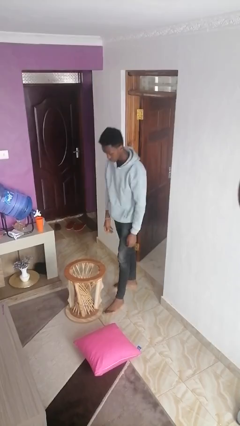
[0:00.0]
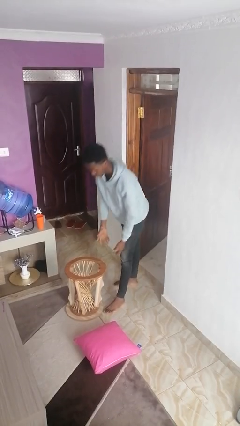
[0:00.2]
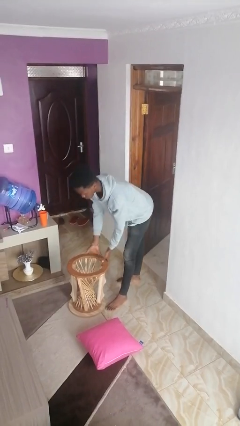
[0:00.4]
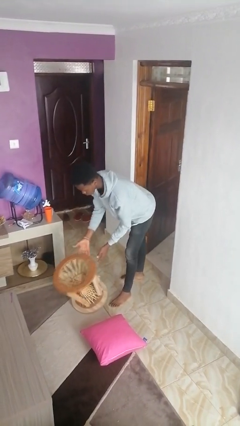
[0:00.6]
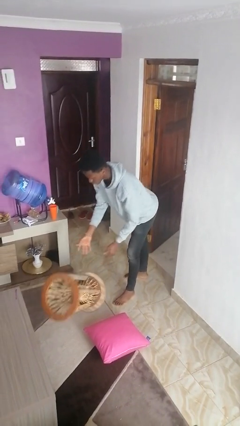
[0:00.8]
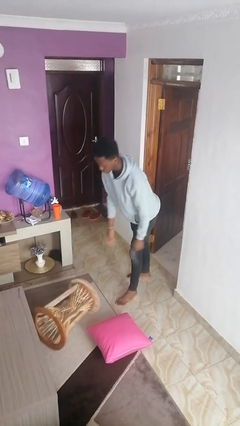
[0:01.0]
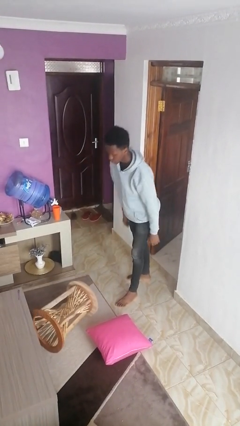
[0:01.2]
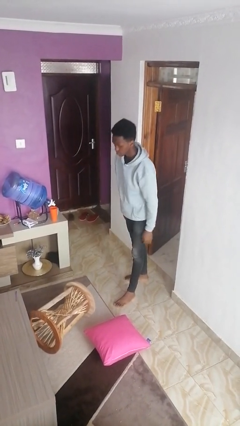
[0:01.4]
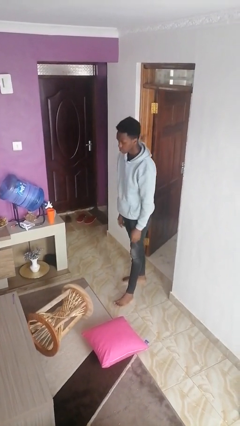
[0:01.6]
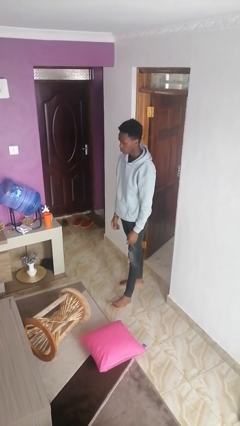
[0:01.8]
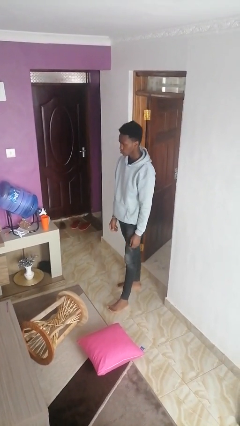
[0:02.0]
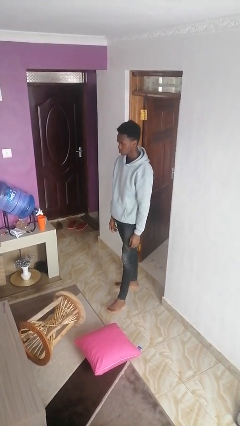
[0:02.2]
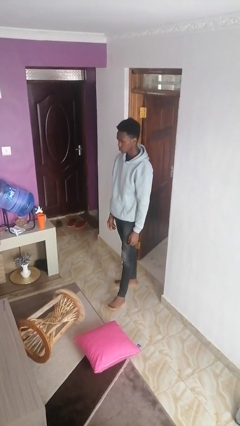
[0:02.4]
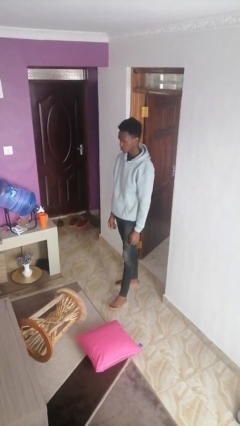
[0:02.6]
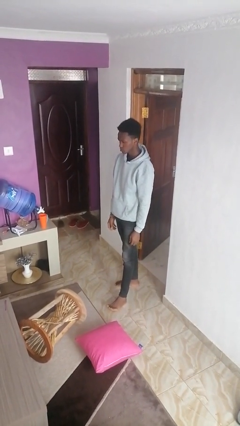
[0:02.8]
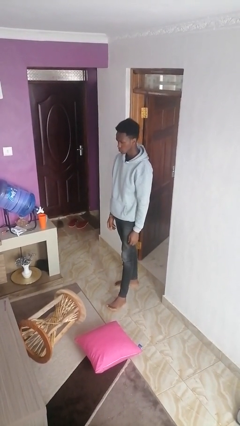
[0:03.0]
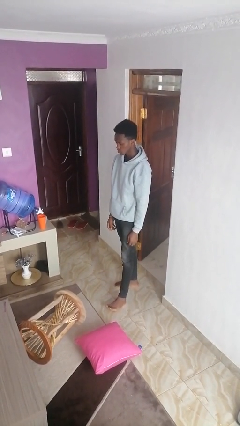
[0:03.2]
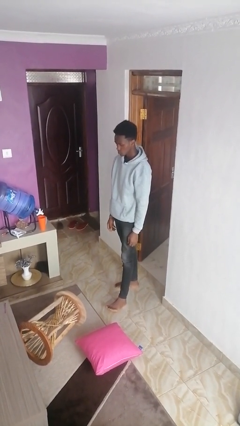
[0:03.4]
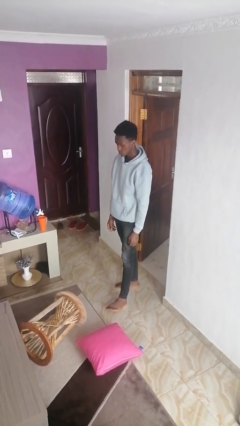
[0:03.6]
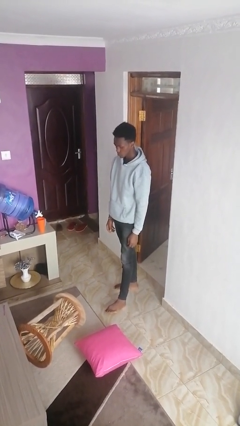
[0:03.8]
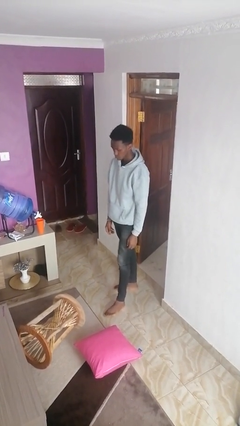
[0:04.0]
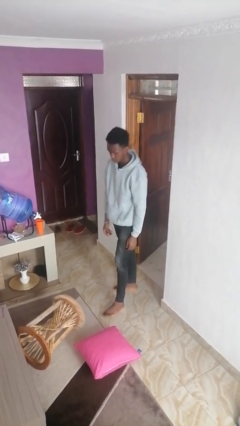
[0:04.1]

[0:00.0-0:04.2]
person knocks over furniture

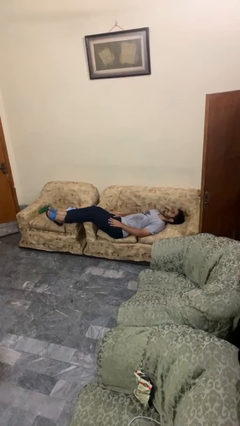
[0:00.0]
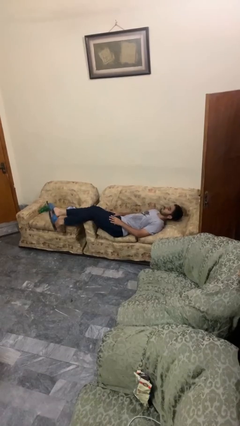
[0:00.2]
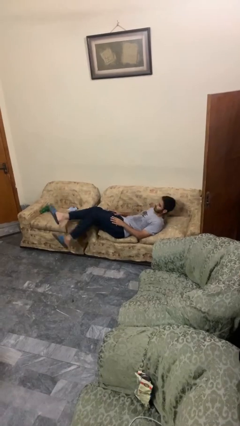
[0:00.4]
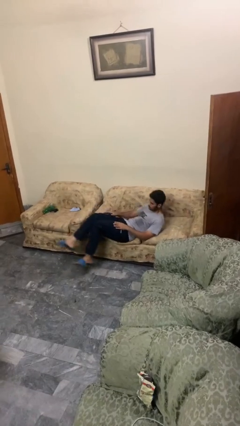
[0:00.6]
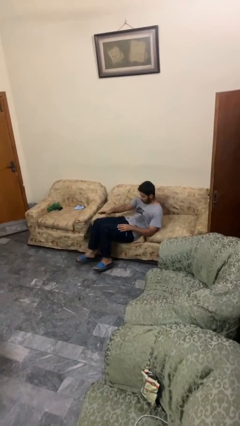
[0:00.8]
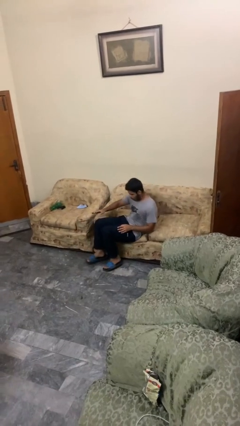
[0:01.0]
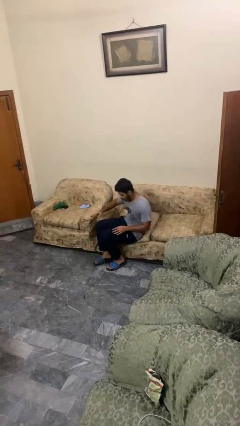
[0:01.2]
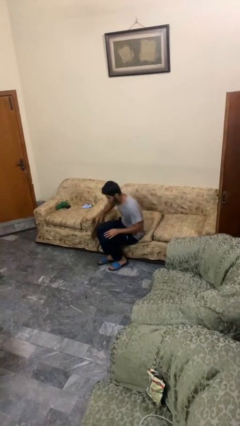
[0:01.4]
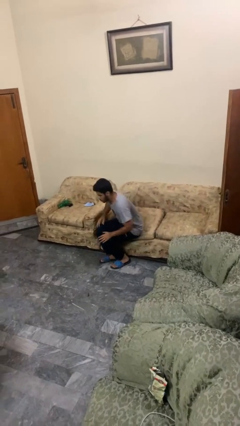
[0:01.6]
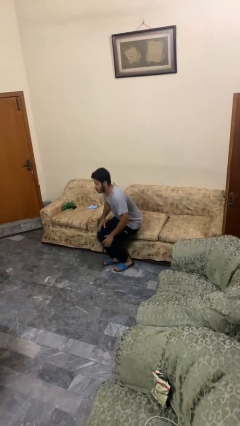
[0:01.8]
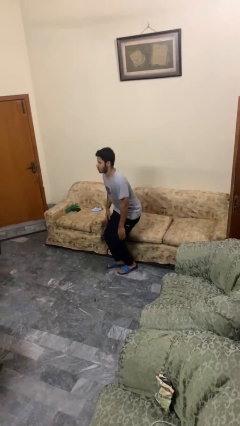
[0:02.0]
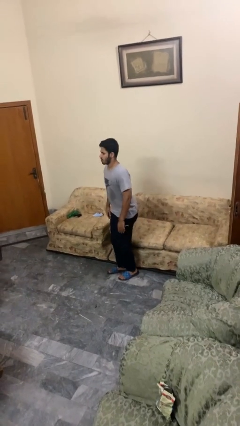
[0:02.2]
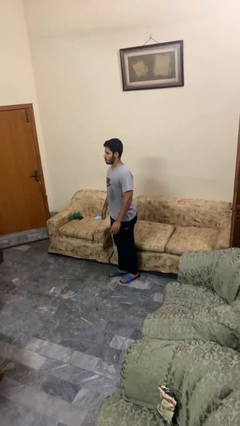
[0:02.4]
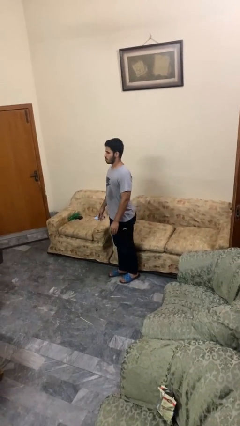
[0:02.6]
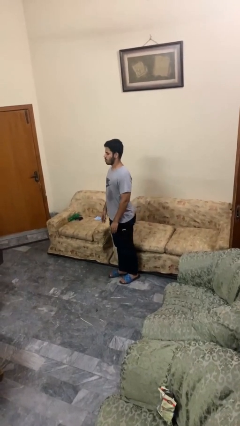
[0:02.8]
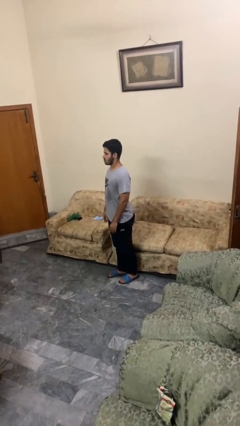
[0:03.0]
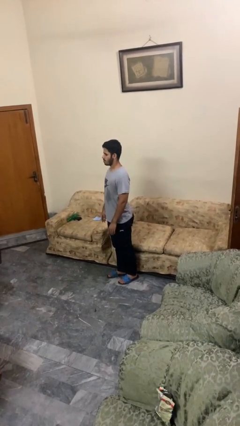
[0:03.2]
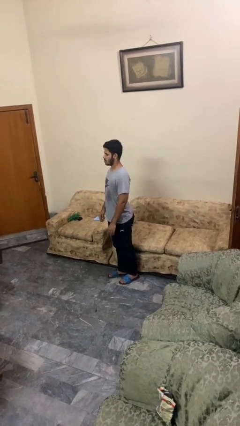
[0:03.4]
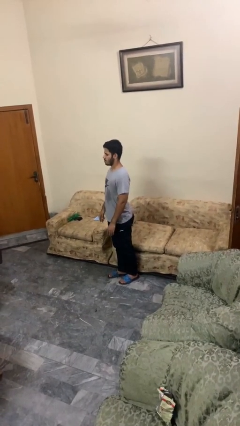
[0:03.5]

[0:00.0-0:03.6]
person stands up

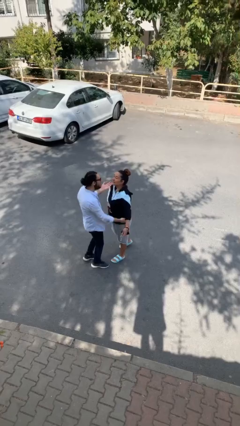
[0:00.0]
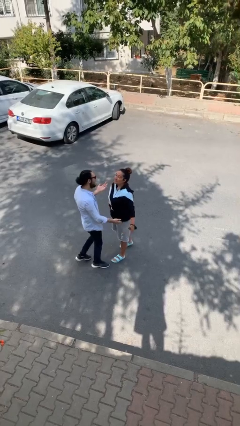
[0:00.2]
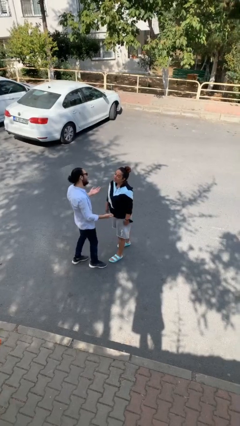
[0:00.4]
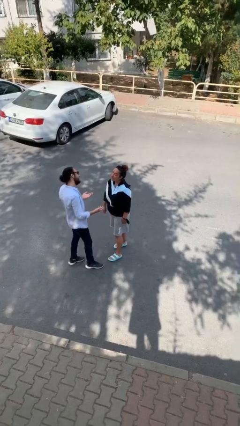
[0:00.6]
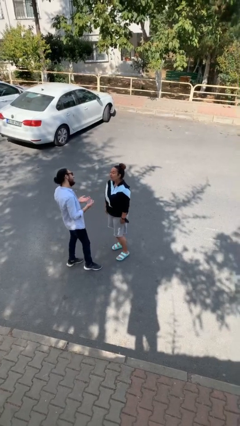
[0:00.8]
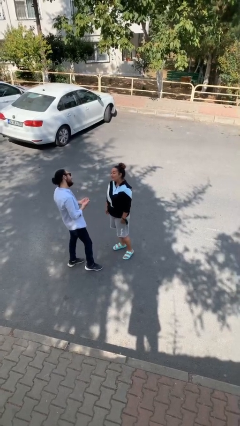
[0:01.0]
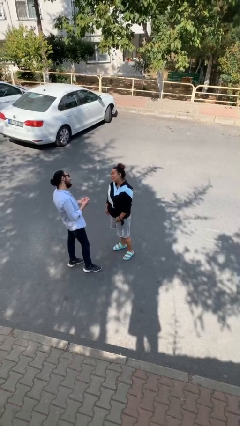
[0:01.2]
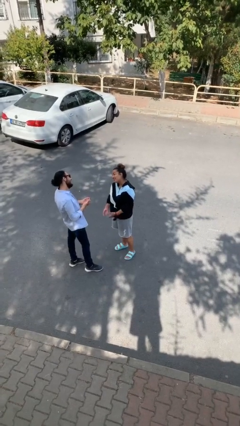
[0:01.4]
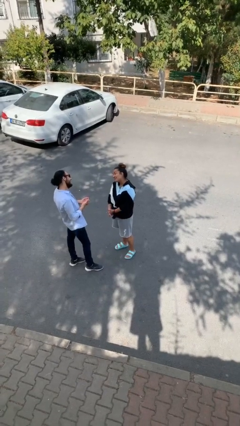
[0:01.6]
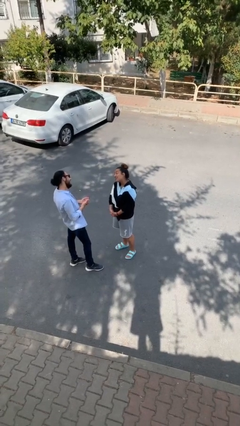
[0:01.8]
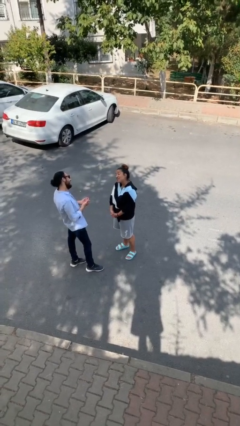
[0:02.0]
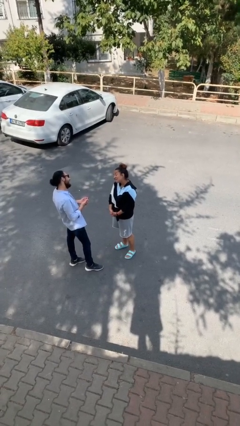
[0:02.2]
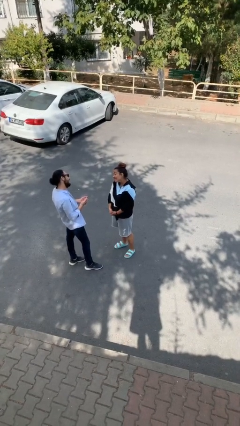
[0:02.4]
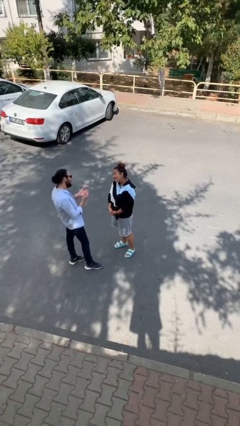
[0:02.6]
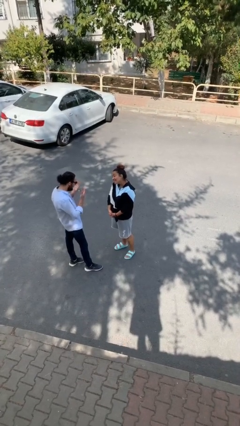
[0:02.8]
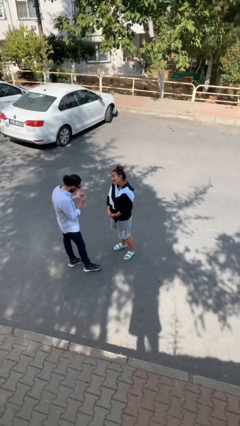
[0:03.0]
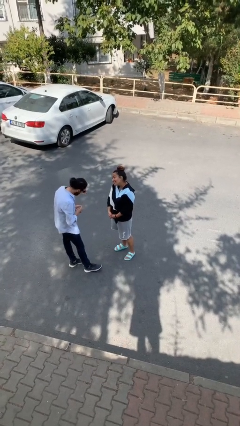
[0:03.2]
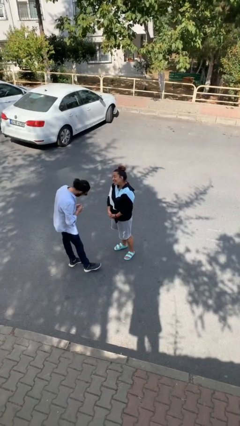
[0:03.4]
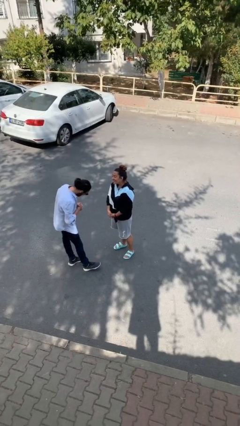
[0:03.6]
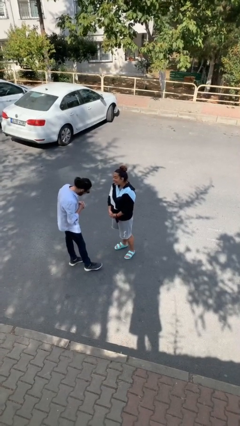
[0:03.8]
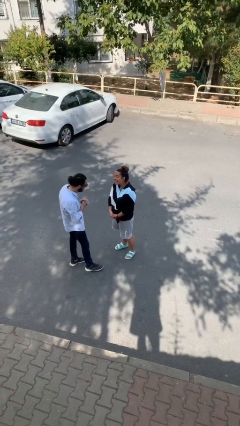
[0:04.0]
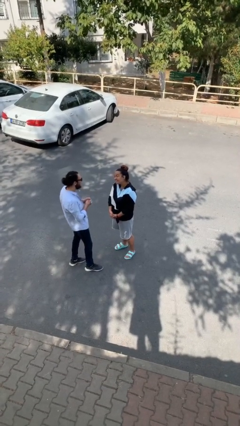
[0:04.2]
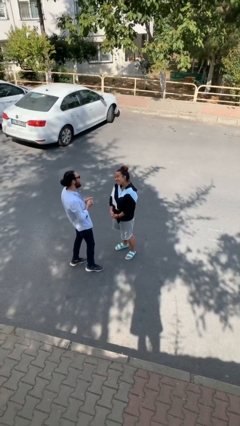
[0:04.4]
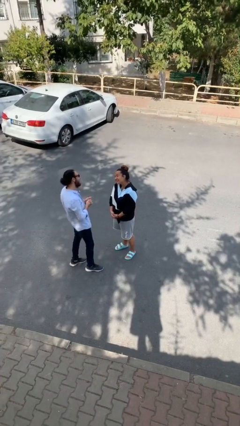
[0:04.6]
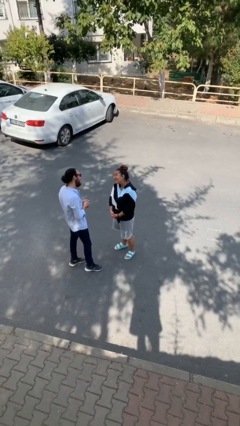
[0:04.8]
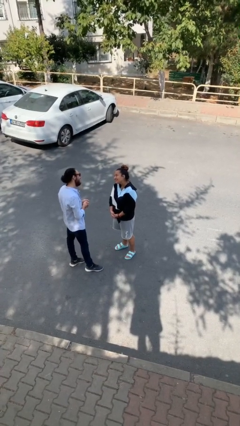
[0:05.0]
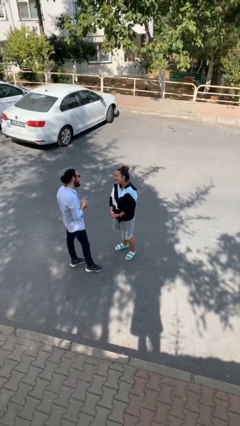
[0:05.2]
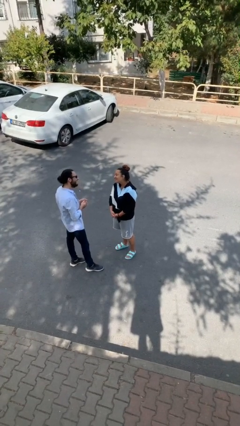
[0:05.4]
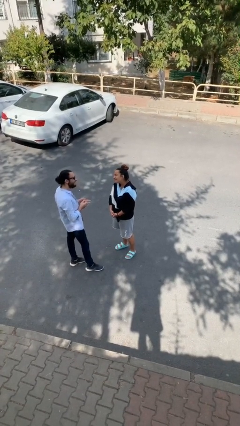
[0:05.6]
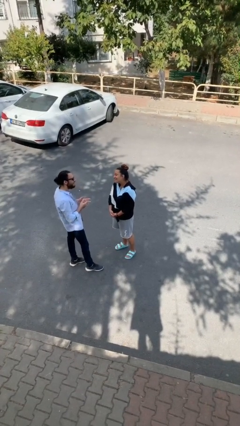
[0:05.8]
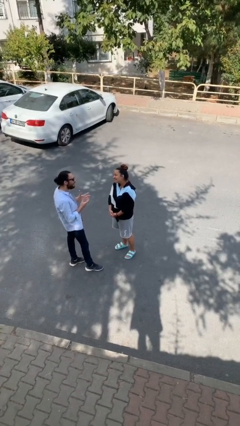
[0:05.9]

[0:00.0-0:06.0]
person talks to person

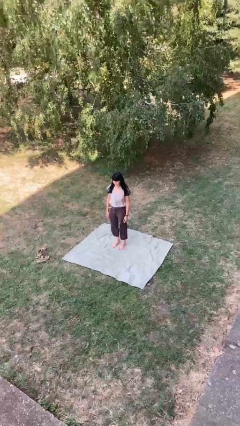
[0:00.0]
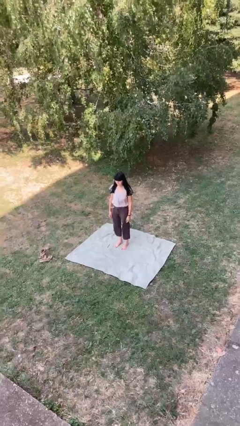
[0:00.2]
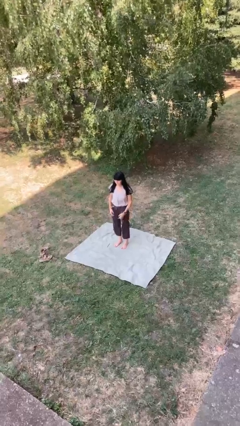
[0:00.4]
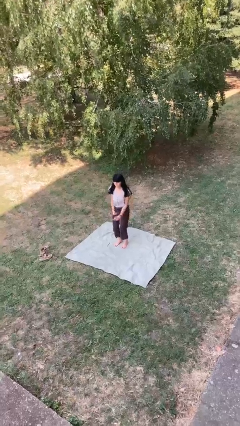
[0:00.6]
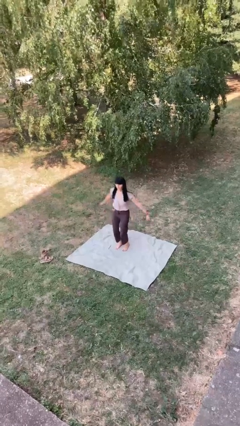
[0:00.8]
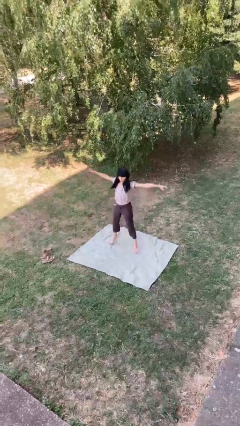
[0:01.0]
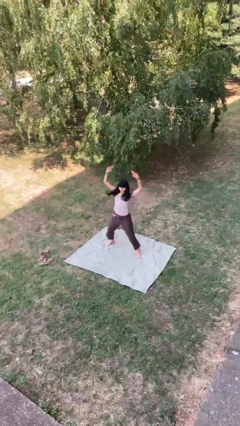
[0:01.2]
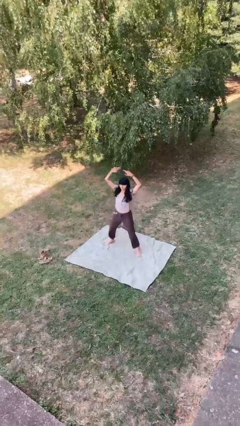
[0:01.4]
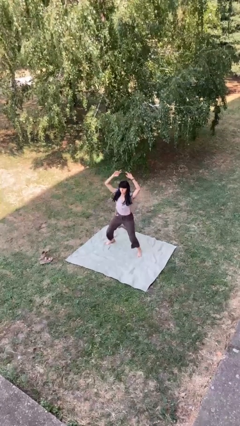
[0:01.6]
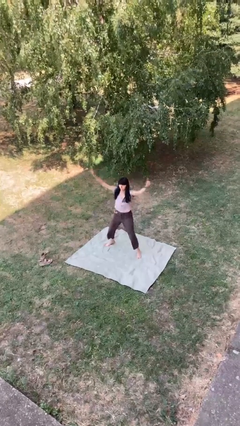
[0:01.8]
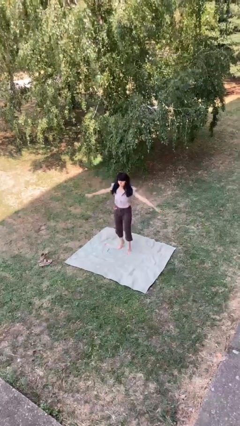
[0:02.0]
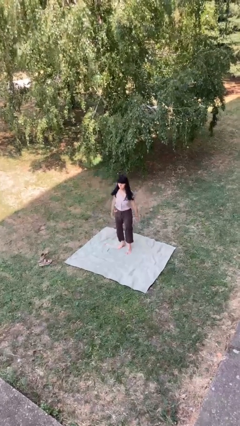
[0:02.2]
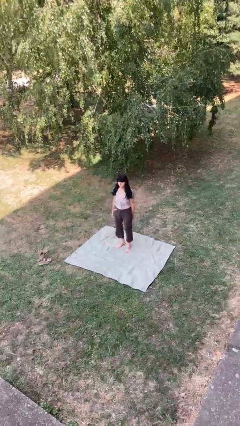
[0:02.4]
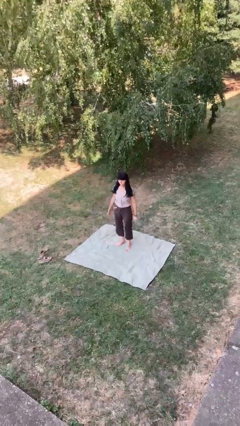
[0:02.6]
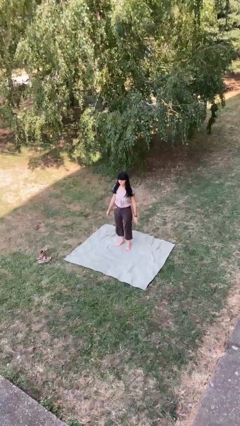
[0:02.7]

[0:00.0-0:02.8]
person exercises with jumping jacks

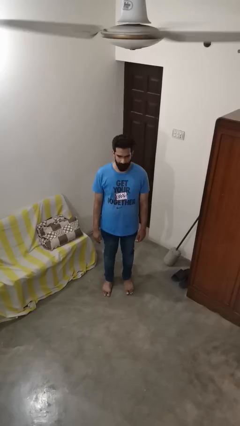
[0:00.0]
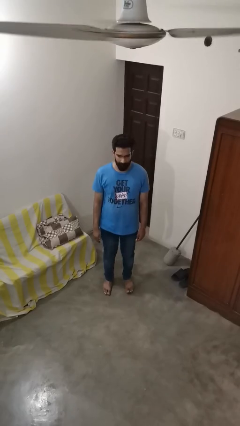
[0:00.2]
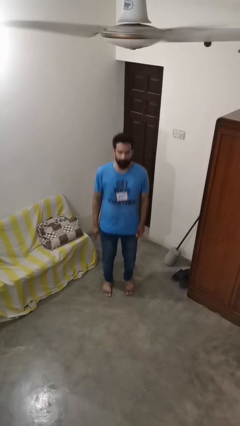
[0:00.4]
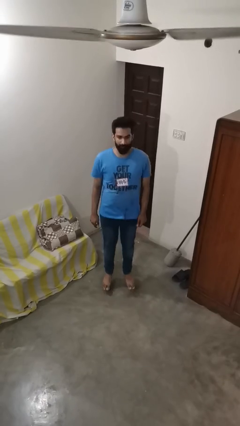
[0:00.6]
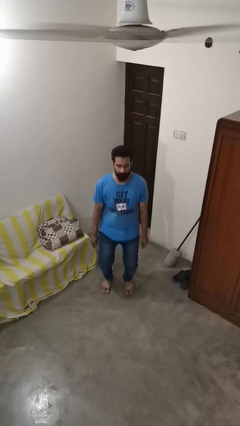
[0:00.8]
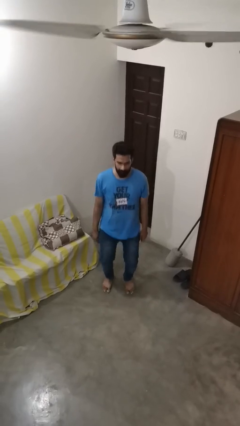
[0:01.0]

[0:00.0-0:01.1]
person jumps

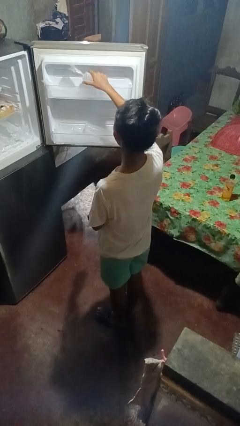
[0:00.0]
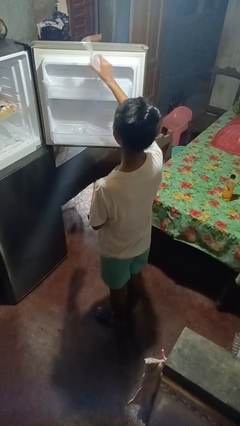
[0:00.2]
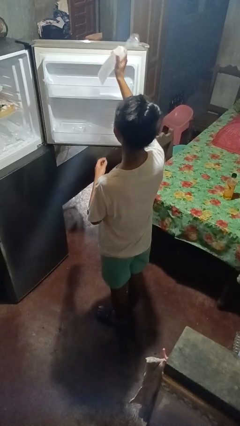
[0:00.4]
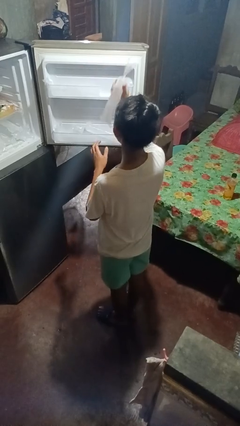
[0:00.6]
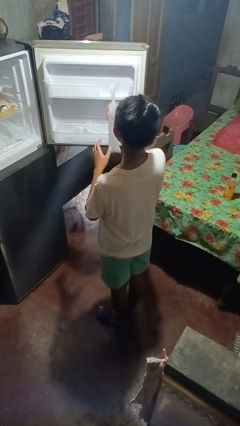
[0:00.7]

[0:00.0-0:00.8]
person takes object from refrigerator
